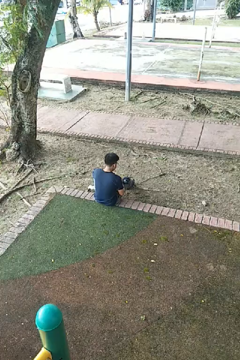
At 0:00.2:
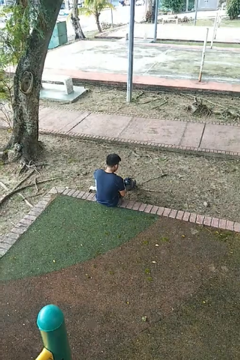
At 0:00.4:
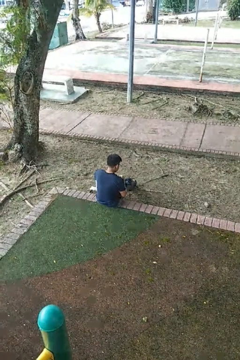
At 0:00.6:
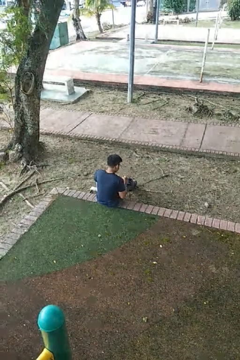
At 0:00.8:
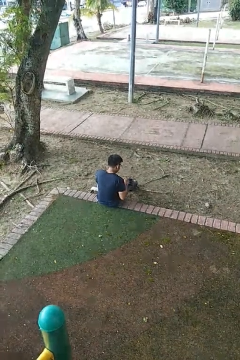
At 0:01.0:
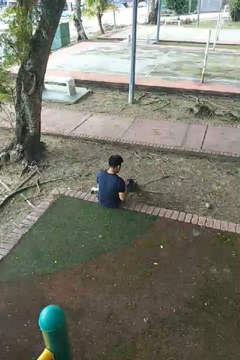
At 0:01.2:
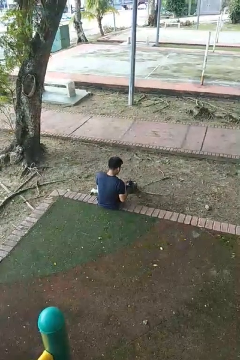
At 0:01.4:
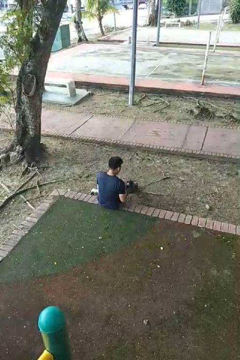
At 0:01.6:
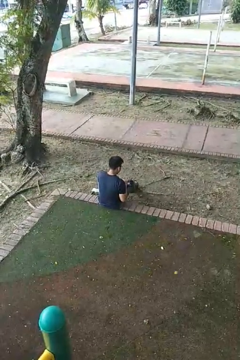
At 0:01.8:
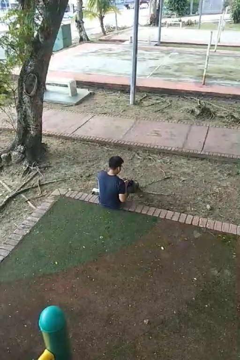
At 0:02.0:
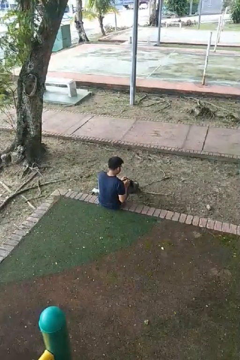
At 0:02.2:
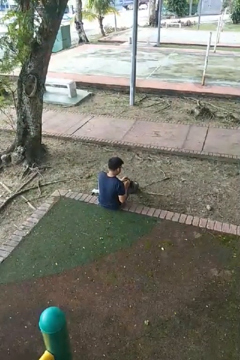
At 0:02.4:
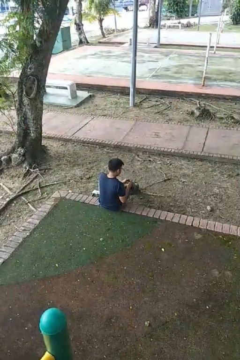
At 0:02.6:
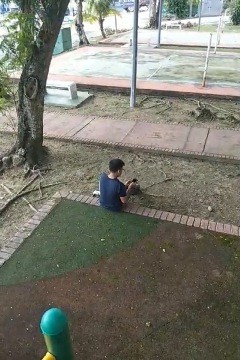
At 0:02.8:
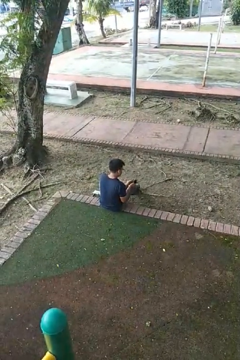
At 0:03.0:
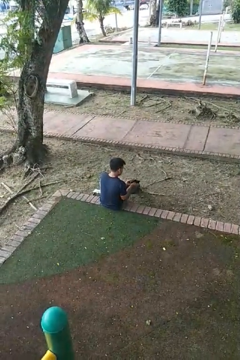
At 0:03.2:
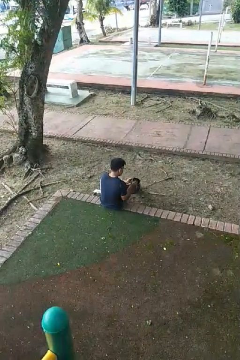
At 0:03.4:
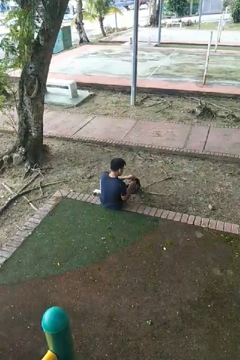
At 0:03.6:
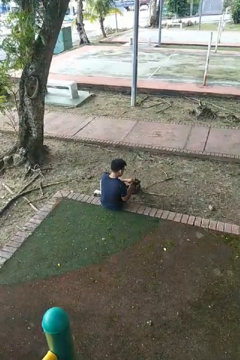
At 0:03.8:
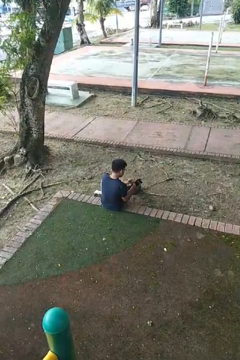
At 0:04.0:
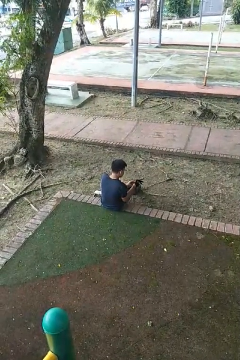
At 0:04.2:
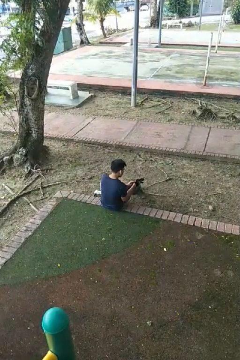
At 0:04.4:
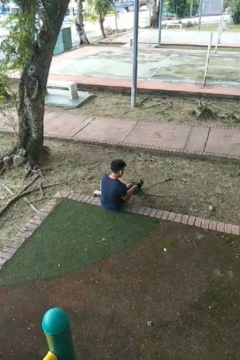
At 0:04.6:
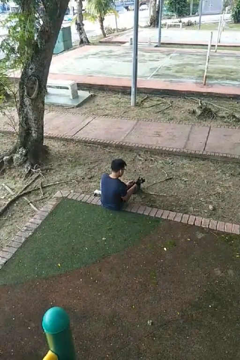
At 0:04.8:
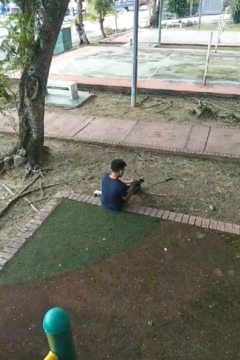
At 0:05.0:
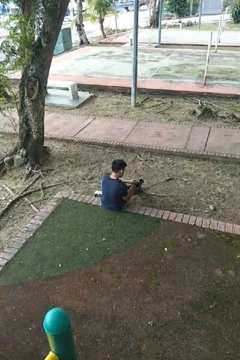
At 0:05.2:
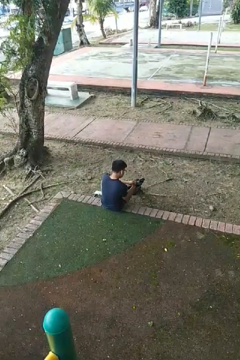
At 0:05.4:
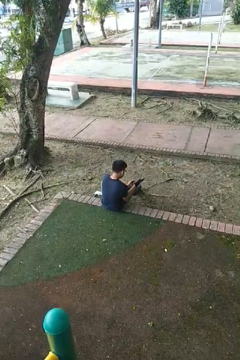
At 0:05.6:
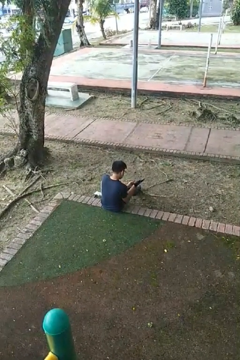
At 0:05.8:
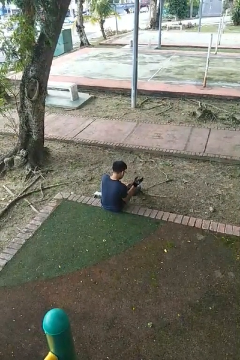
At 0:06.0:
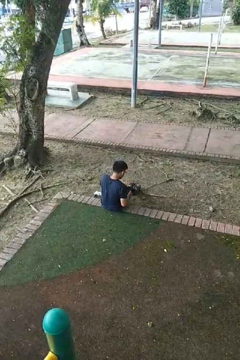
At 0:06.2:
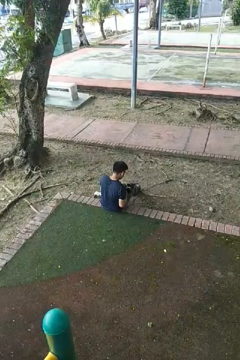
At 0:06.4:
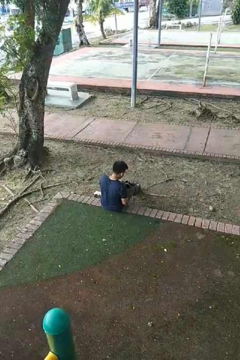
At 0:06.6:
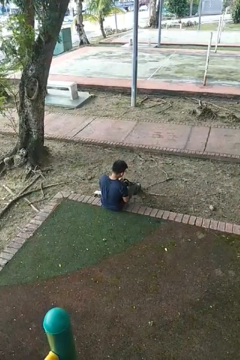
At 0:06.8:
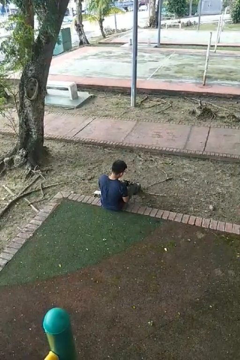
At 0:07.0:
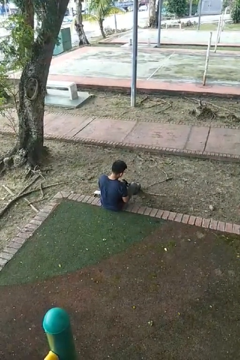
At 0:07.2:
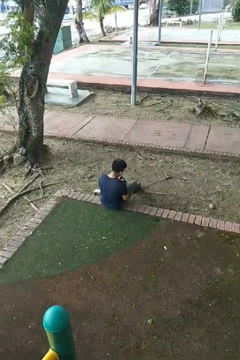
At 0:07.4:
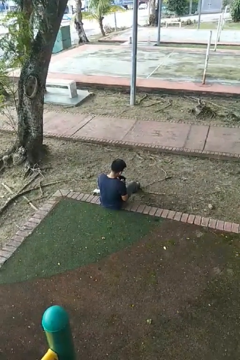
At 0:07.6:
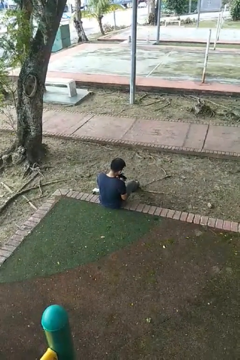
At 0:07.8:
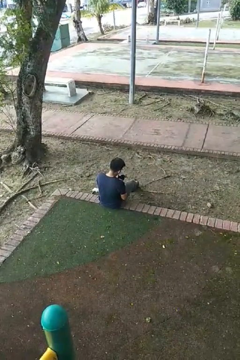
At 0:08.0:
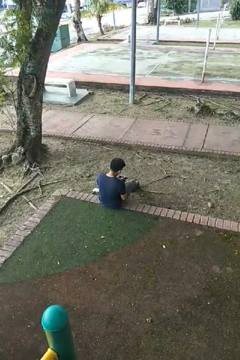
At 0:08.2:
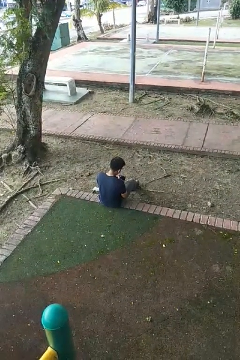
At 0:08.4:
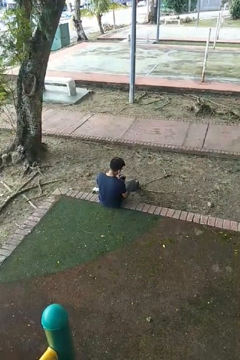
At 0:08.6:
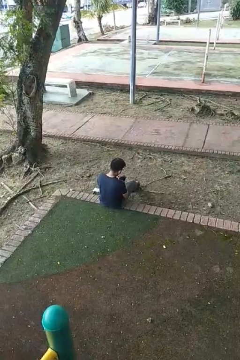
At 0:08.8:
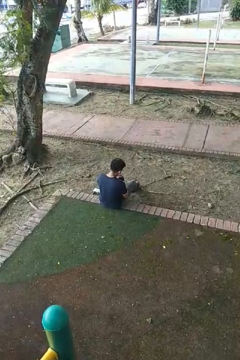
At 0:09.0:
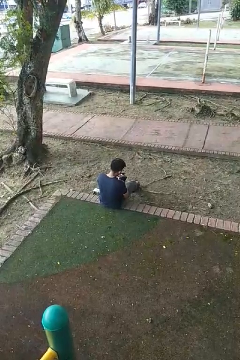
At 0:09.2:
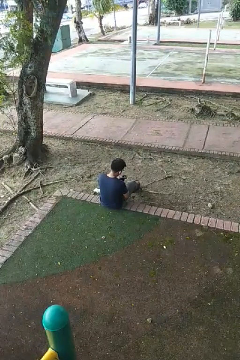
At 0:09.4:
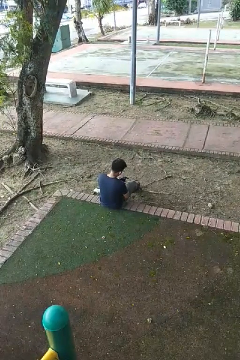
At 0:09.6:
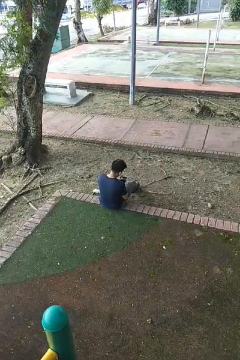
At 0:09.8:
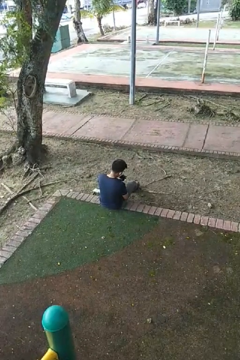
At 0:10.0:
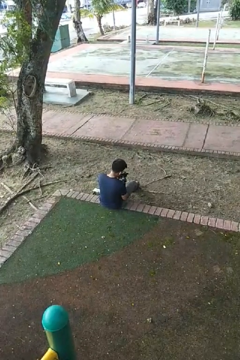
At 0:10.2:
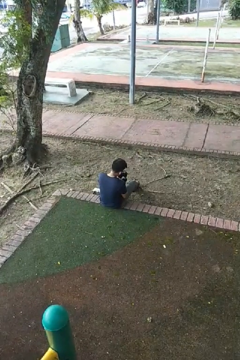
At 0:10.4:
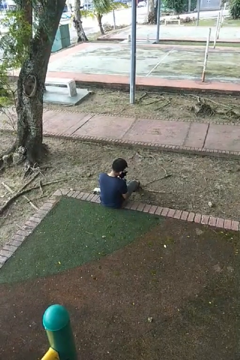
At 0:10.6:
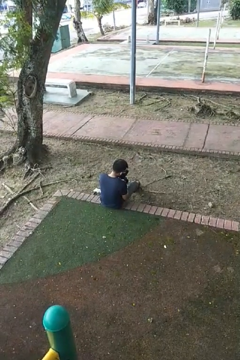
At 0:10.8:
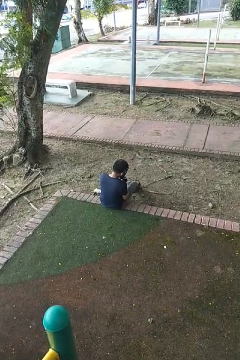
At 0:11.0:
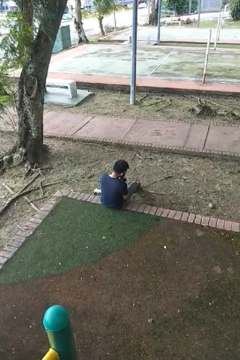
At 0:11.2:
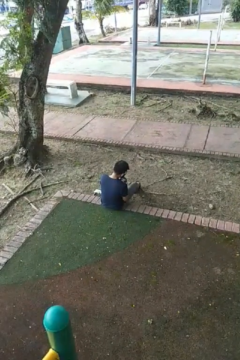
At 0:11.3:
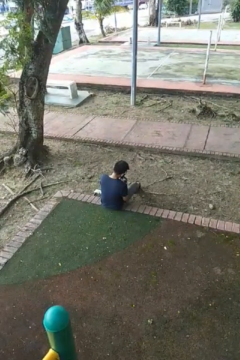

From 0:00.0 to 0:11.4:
person puts on gloves

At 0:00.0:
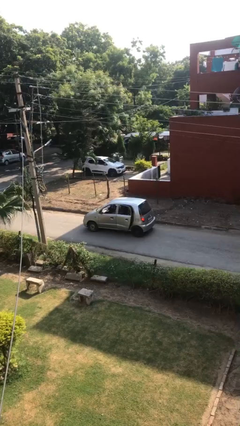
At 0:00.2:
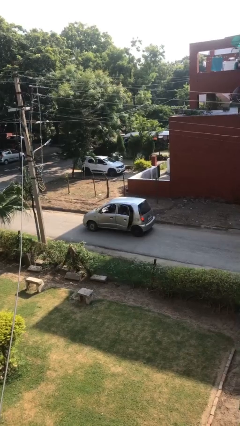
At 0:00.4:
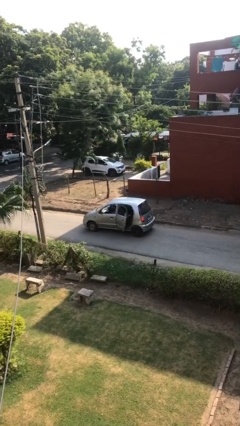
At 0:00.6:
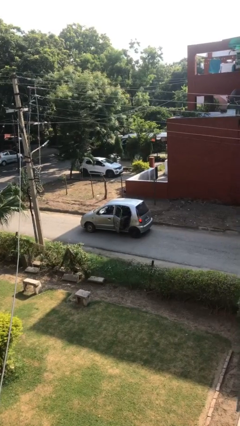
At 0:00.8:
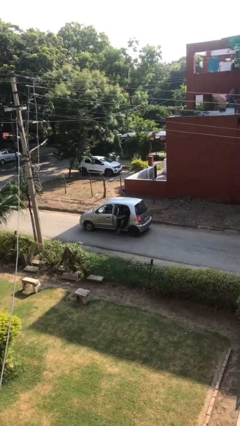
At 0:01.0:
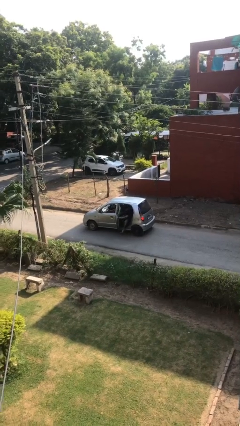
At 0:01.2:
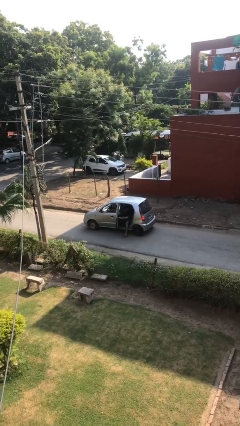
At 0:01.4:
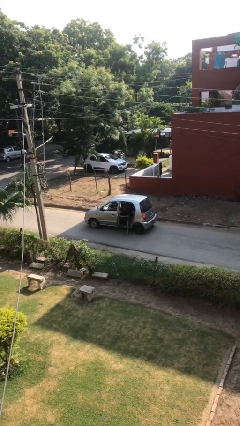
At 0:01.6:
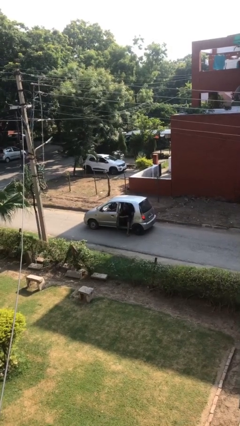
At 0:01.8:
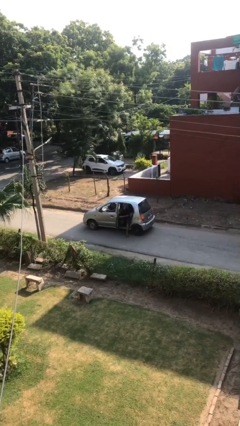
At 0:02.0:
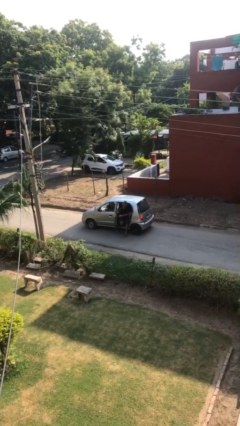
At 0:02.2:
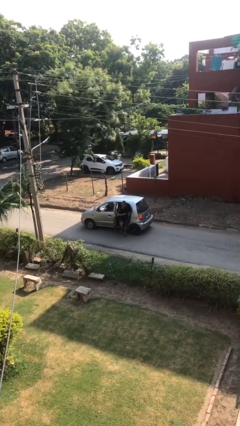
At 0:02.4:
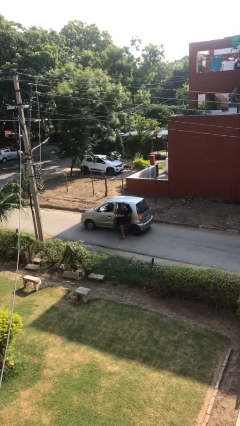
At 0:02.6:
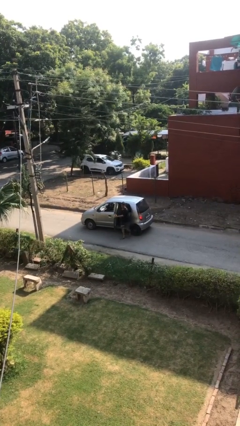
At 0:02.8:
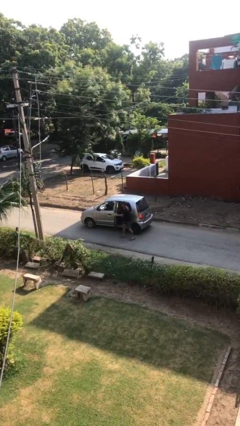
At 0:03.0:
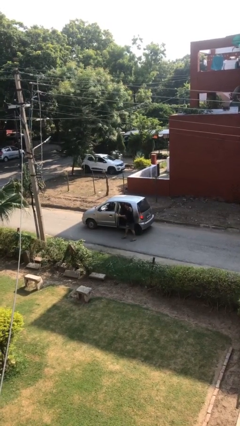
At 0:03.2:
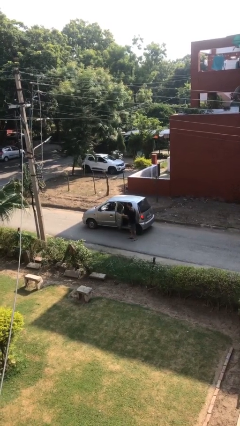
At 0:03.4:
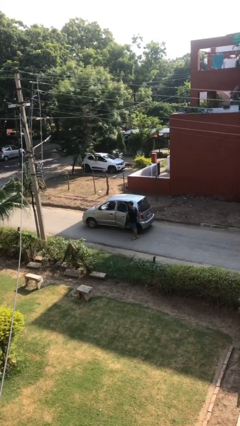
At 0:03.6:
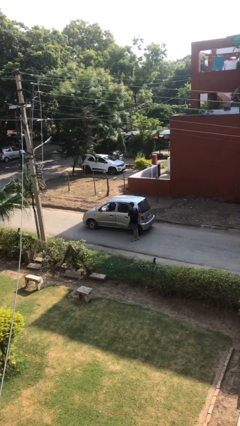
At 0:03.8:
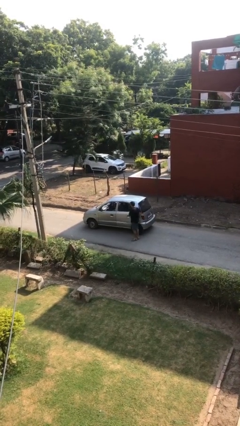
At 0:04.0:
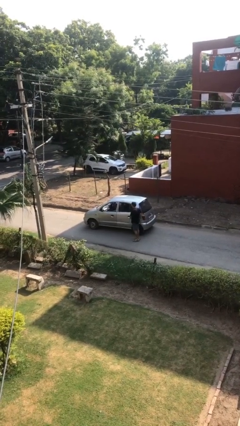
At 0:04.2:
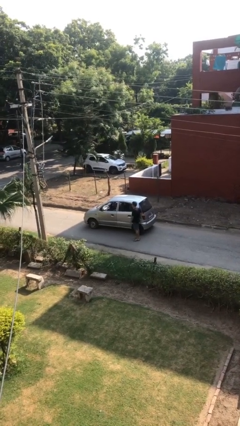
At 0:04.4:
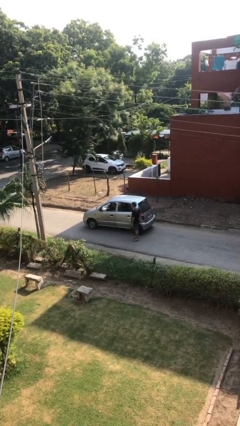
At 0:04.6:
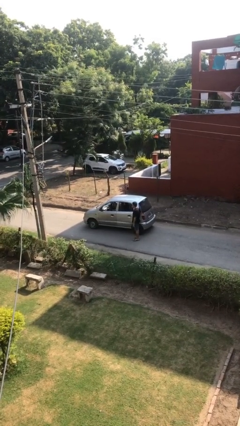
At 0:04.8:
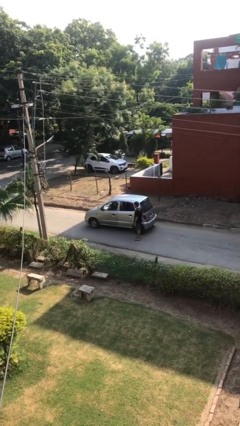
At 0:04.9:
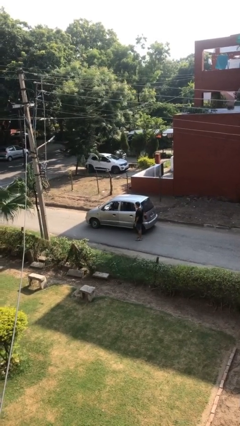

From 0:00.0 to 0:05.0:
car drops off person

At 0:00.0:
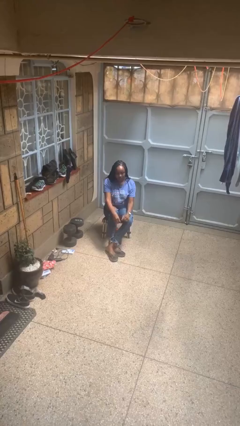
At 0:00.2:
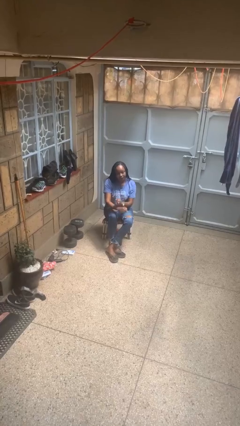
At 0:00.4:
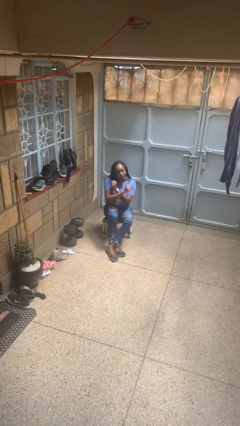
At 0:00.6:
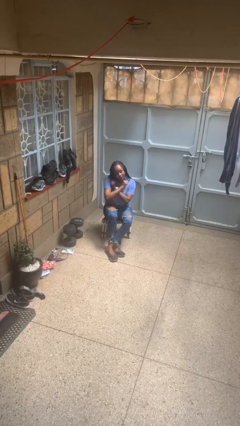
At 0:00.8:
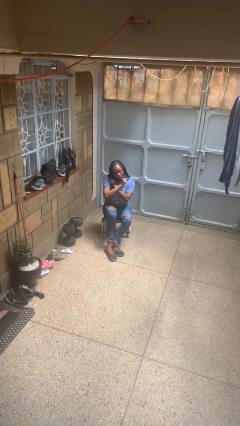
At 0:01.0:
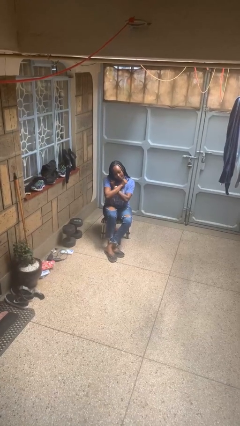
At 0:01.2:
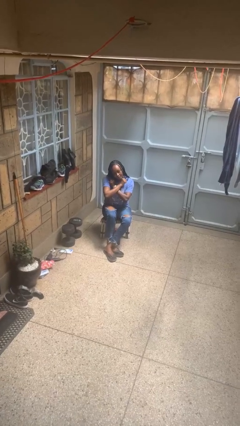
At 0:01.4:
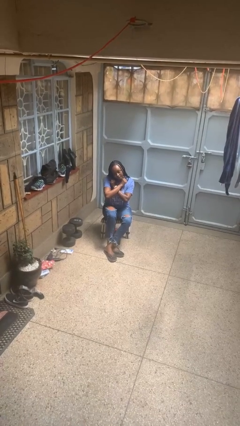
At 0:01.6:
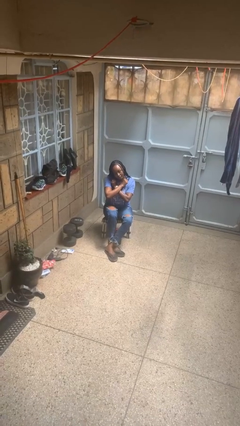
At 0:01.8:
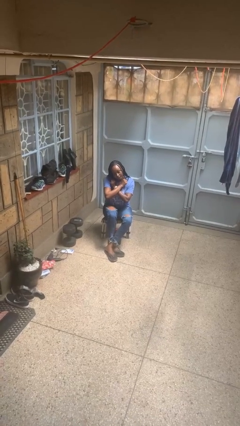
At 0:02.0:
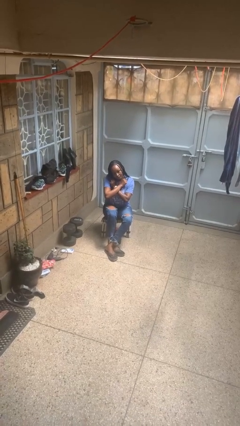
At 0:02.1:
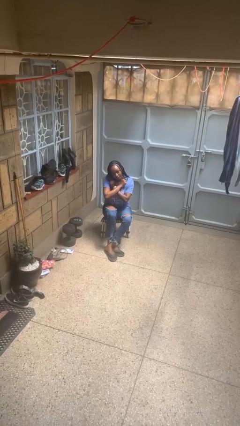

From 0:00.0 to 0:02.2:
person gestures arms x

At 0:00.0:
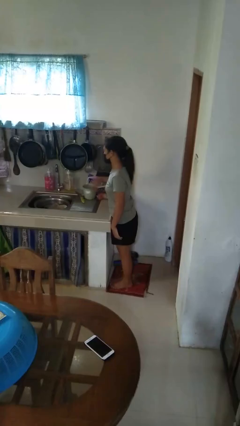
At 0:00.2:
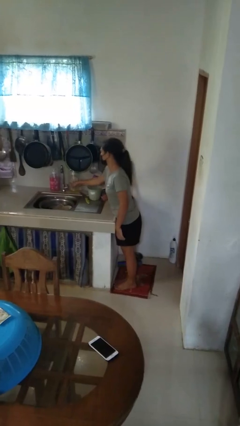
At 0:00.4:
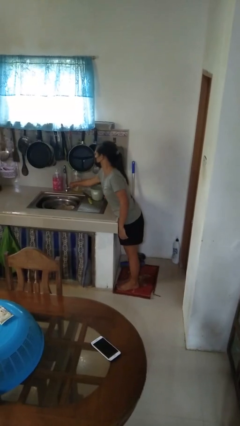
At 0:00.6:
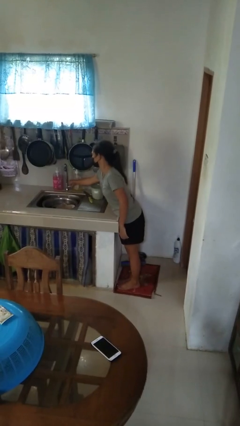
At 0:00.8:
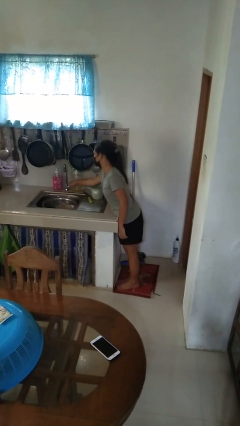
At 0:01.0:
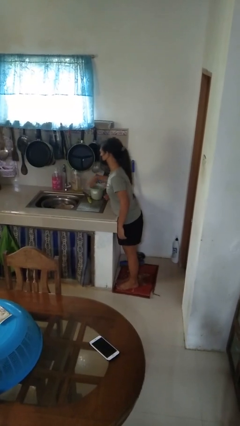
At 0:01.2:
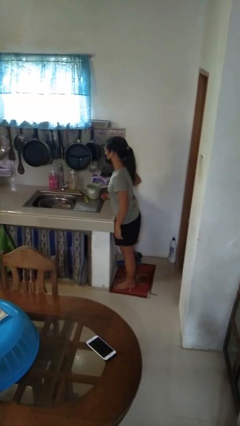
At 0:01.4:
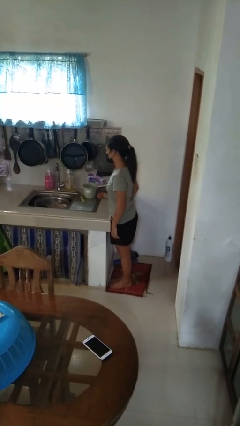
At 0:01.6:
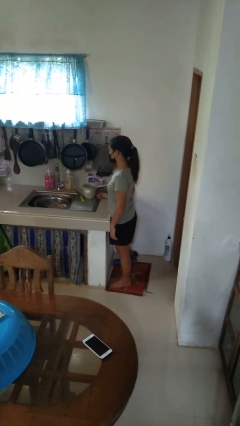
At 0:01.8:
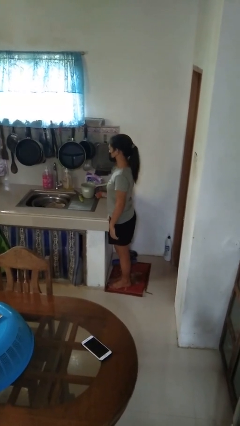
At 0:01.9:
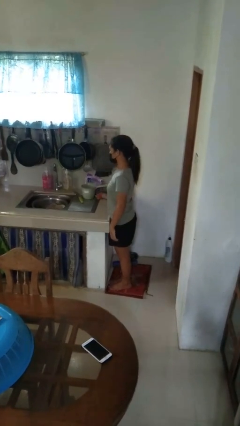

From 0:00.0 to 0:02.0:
person turns off faucet
